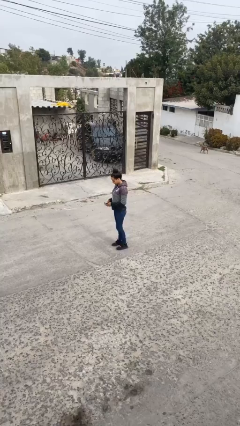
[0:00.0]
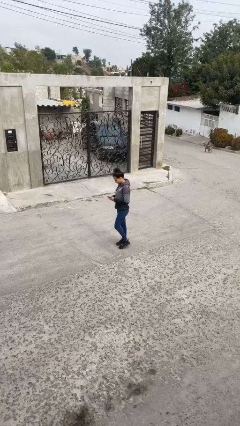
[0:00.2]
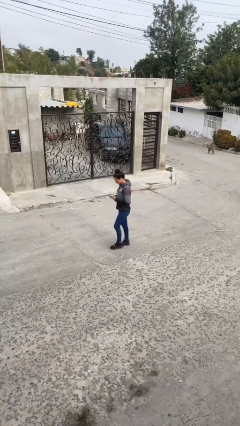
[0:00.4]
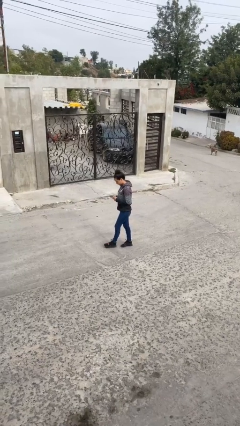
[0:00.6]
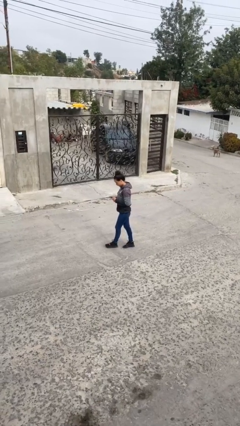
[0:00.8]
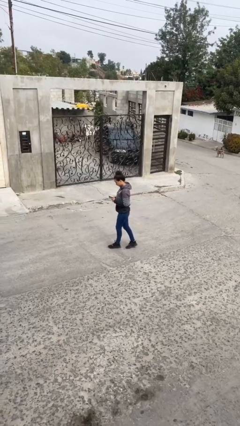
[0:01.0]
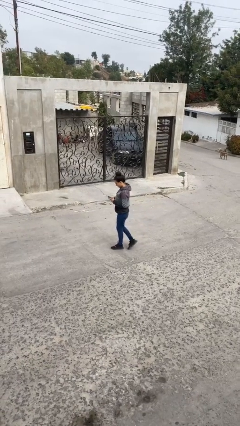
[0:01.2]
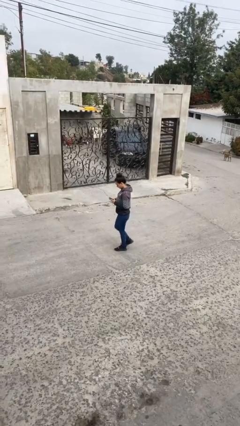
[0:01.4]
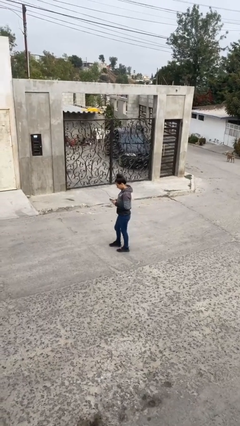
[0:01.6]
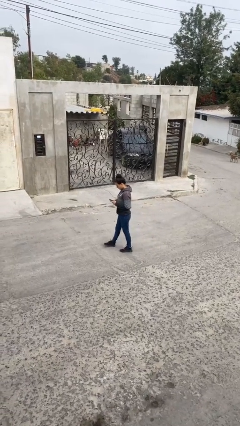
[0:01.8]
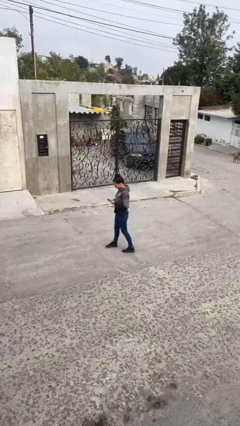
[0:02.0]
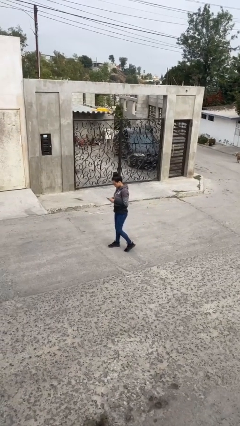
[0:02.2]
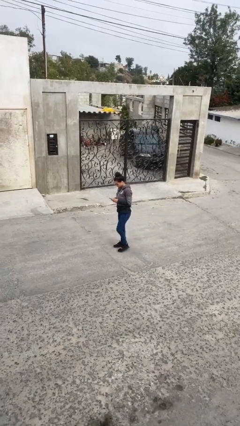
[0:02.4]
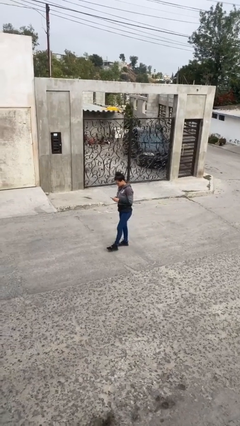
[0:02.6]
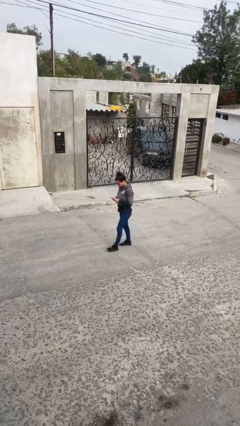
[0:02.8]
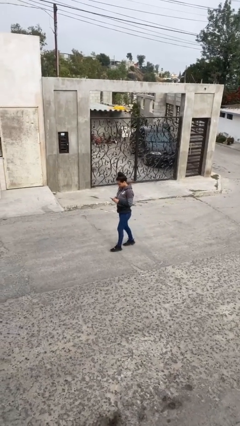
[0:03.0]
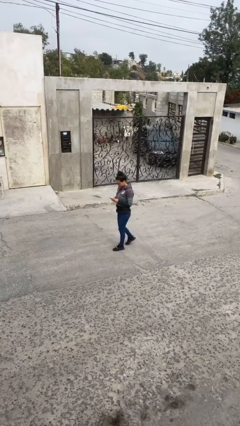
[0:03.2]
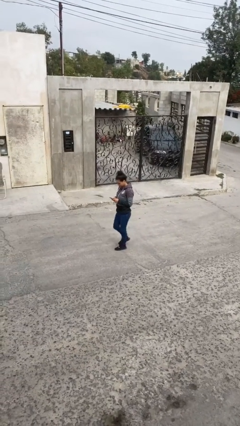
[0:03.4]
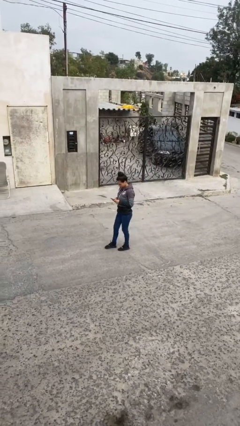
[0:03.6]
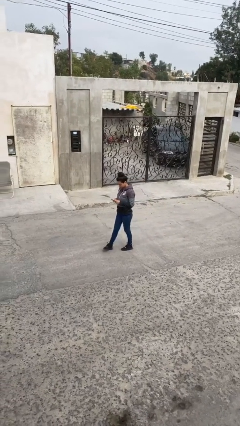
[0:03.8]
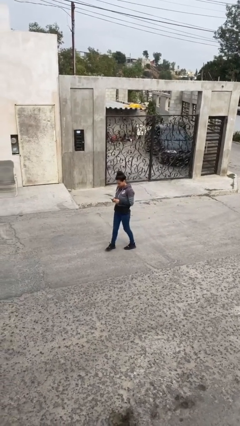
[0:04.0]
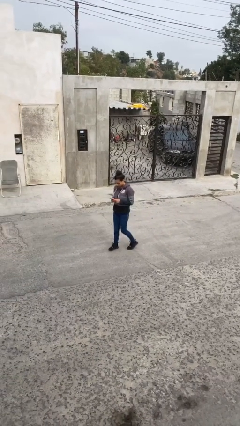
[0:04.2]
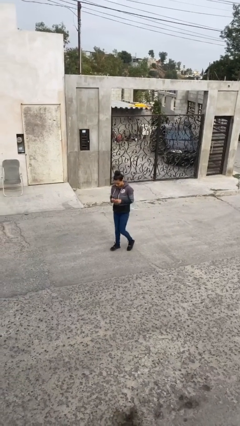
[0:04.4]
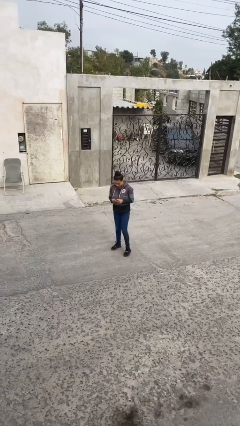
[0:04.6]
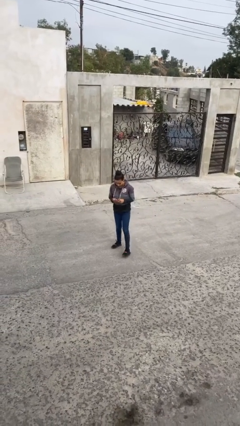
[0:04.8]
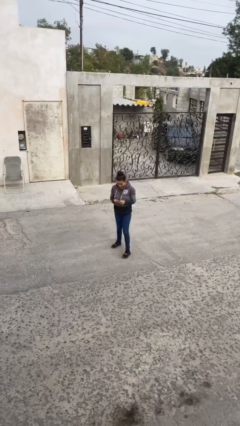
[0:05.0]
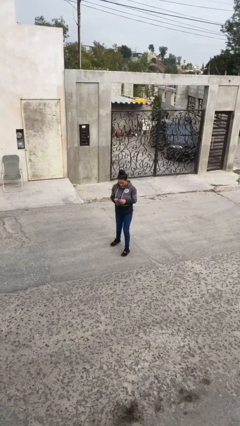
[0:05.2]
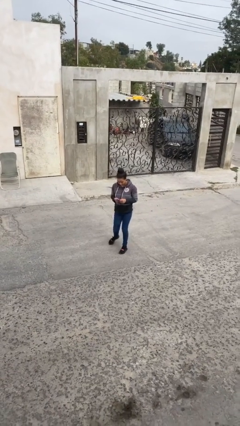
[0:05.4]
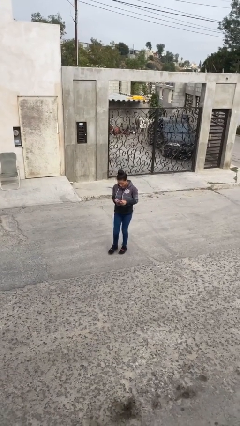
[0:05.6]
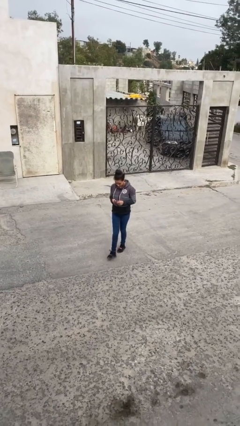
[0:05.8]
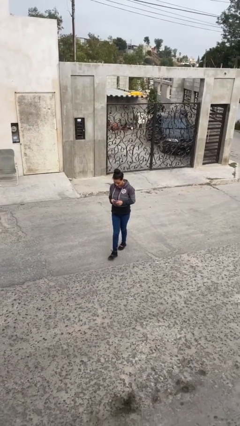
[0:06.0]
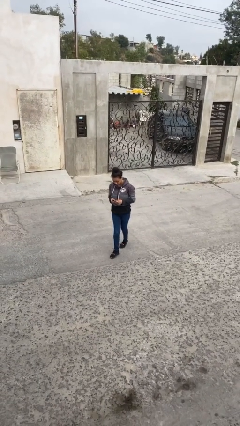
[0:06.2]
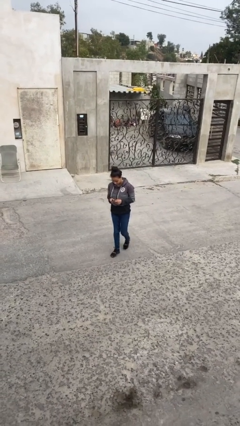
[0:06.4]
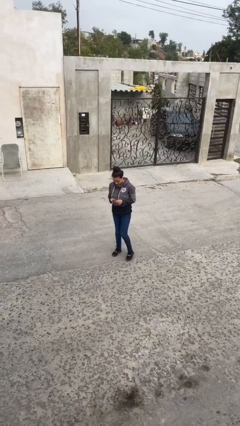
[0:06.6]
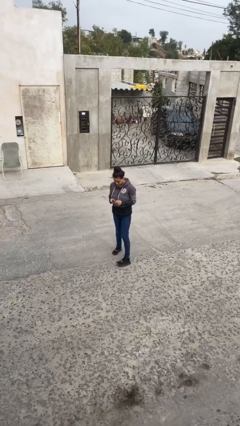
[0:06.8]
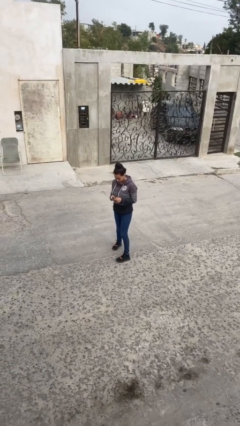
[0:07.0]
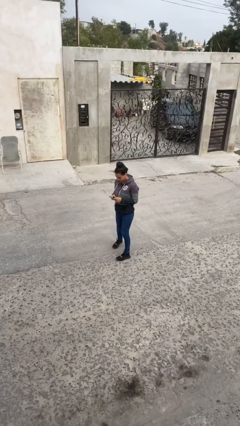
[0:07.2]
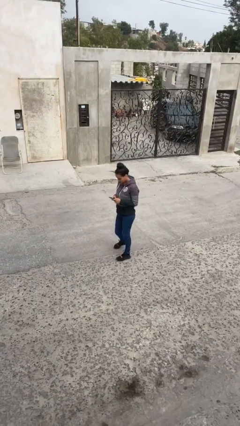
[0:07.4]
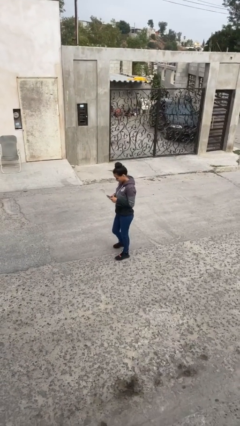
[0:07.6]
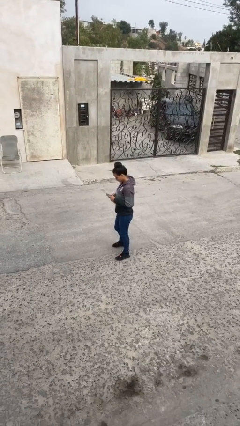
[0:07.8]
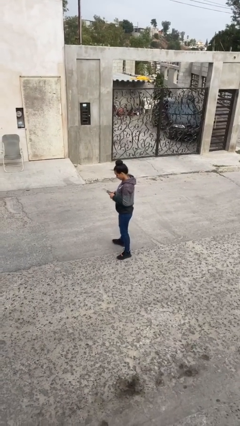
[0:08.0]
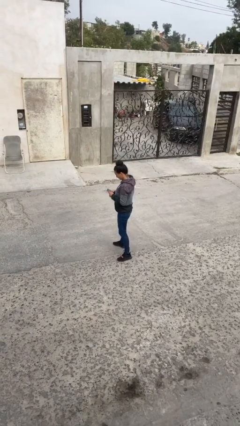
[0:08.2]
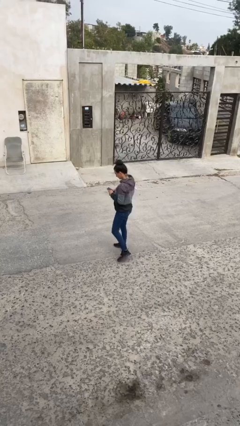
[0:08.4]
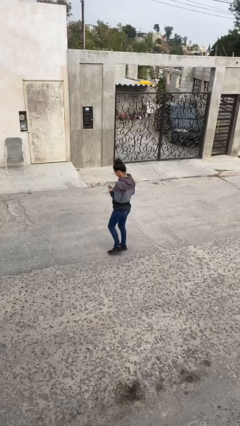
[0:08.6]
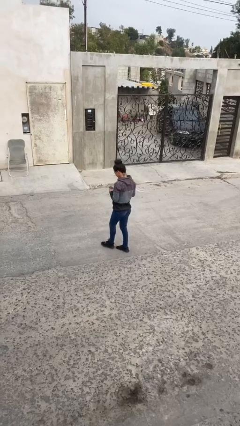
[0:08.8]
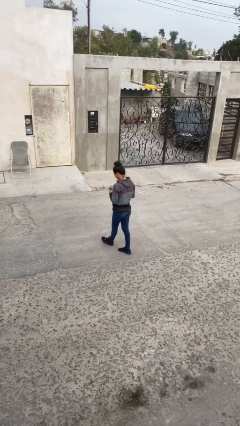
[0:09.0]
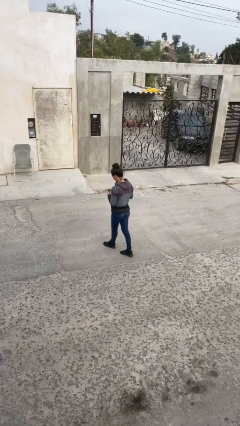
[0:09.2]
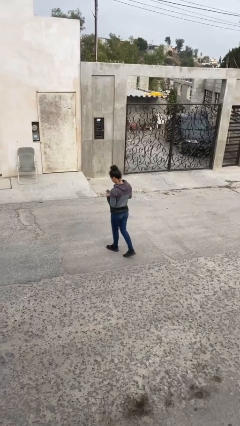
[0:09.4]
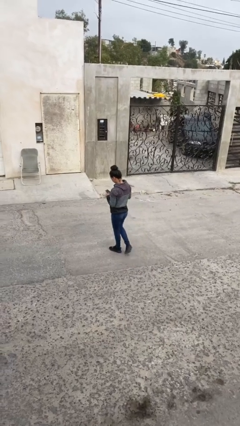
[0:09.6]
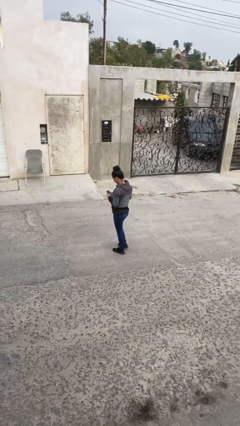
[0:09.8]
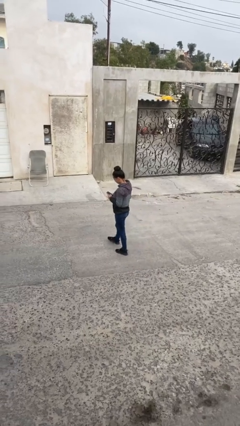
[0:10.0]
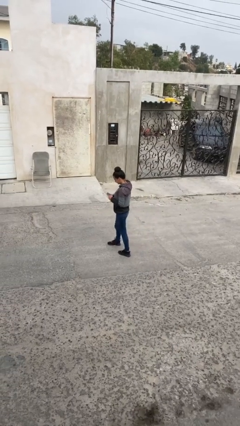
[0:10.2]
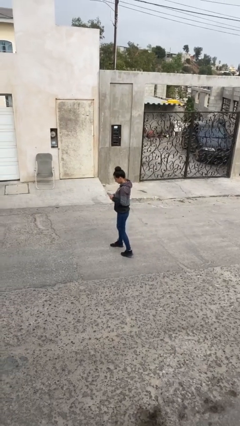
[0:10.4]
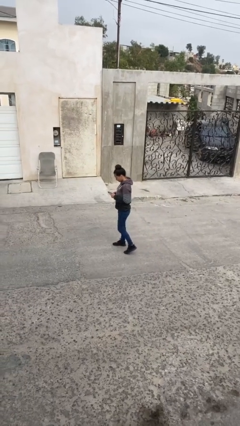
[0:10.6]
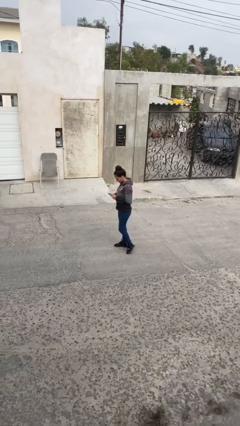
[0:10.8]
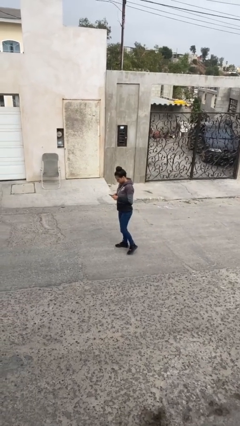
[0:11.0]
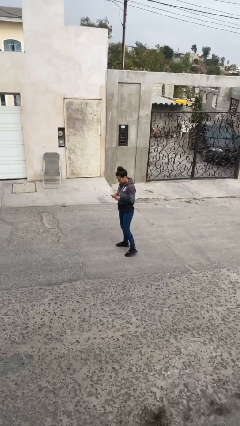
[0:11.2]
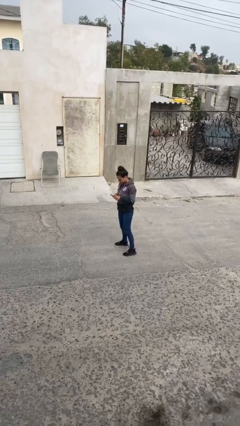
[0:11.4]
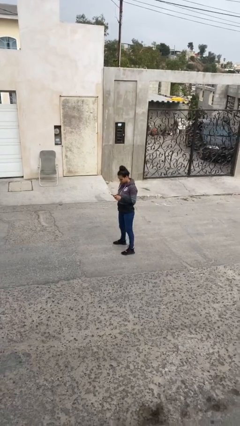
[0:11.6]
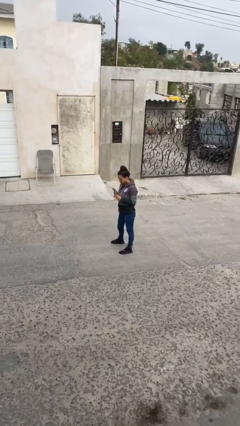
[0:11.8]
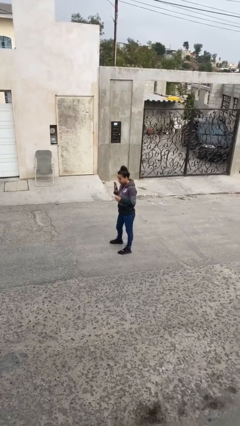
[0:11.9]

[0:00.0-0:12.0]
person texts on phone

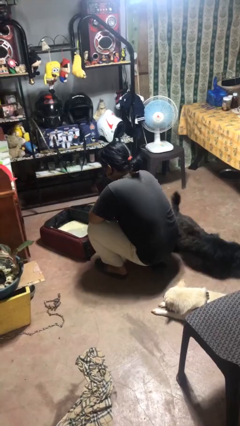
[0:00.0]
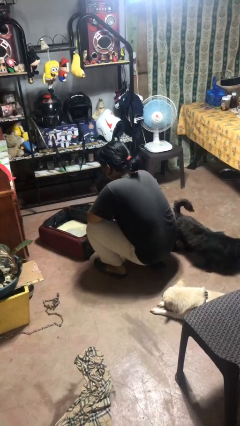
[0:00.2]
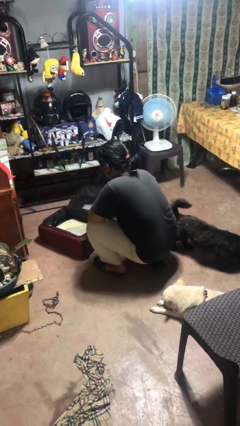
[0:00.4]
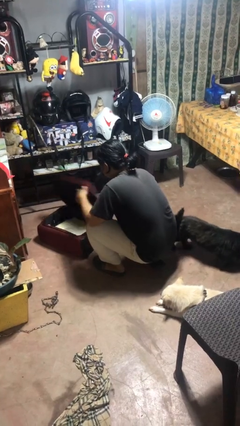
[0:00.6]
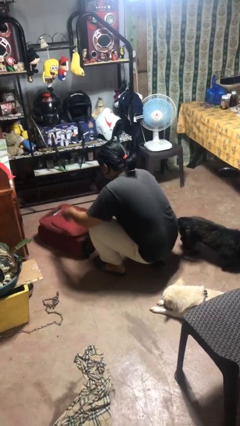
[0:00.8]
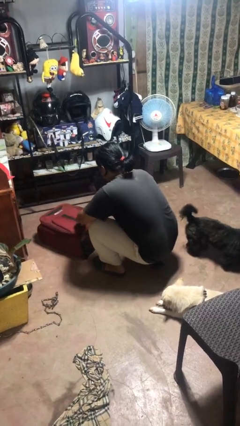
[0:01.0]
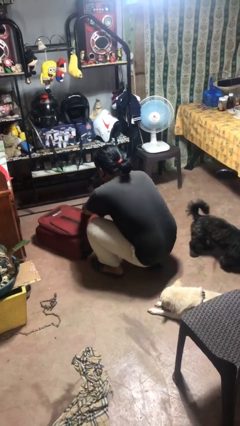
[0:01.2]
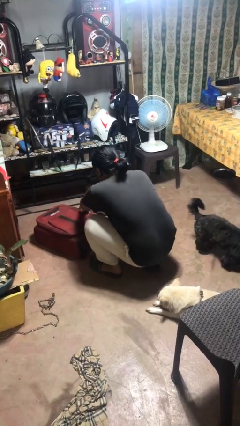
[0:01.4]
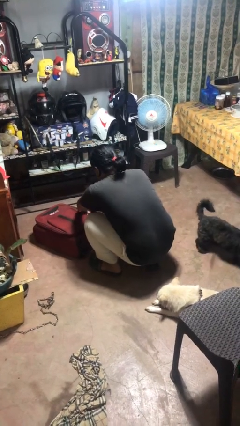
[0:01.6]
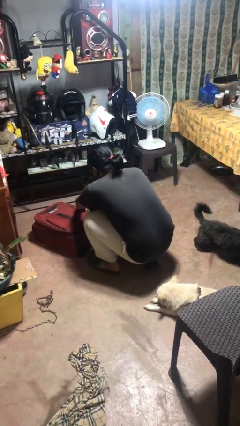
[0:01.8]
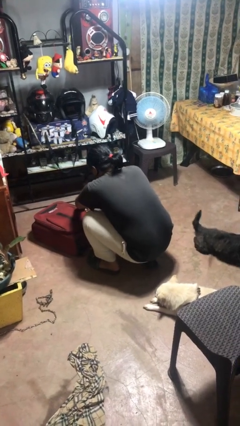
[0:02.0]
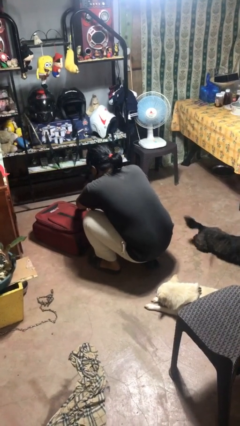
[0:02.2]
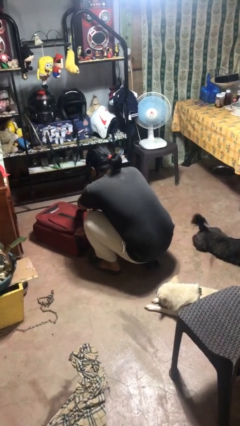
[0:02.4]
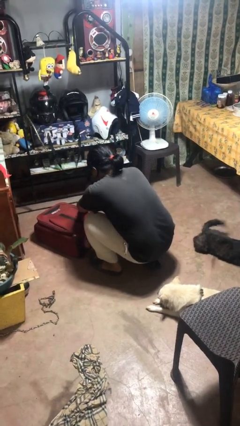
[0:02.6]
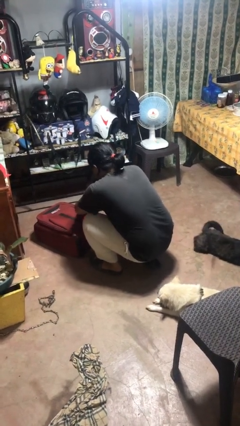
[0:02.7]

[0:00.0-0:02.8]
person closes suitcase

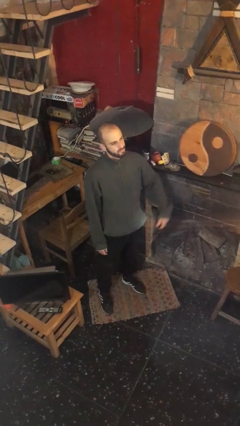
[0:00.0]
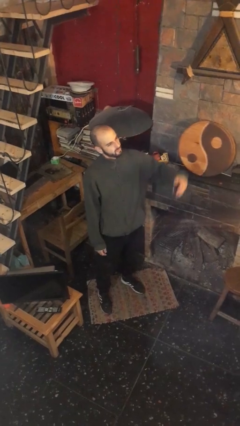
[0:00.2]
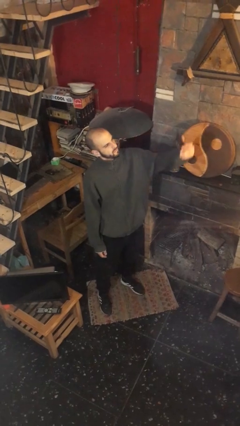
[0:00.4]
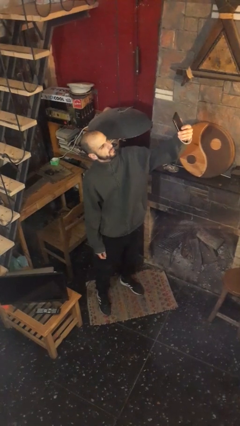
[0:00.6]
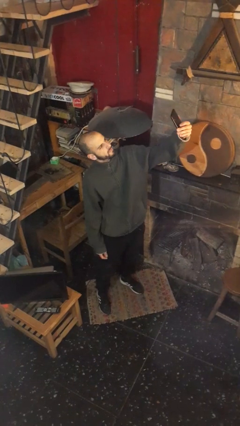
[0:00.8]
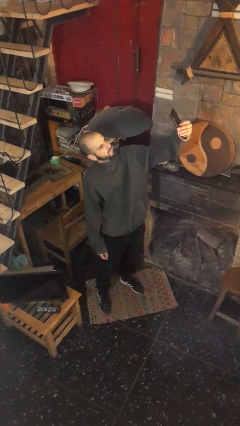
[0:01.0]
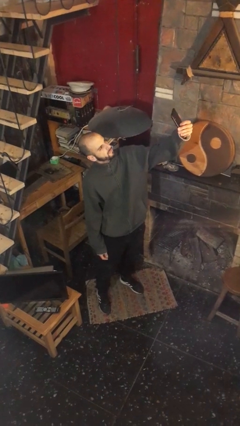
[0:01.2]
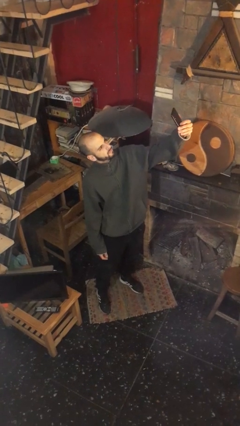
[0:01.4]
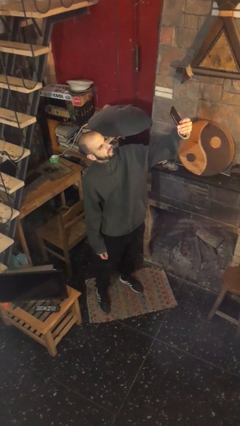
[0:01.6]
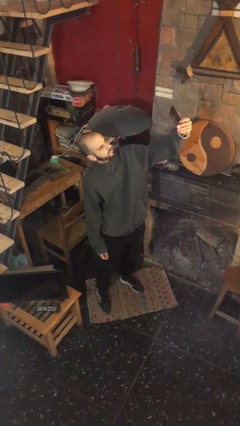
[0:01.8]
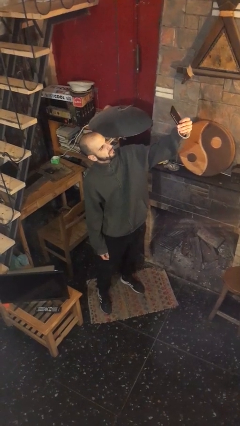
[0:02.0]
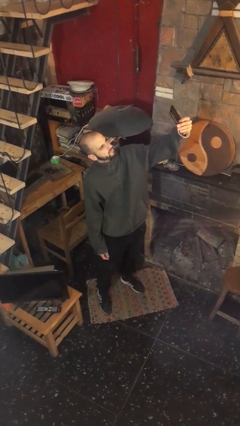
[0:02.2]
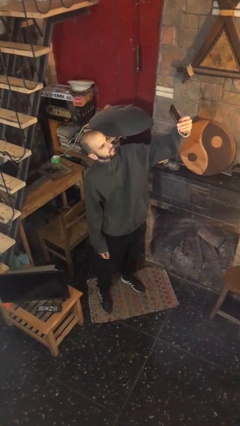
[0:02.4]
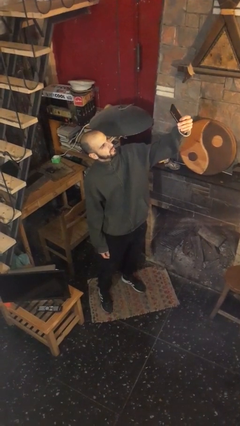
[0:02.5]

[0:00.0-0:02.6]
person takes selfie

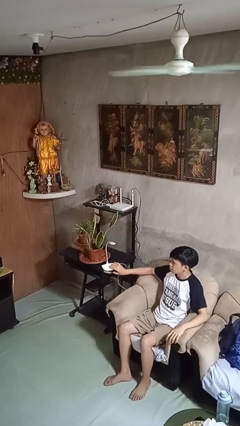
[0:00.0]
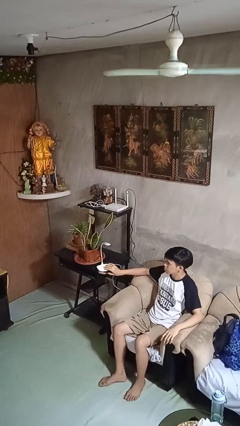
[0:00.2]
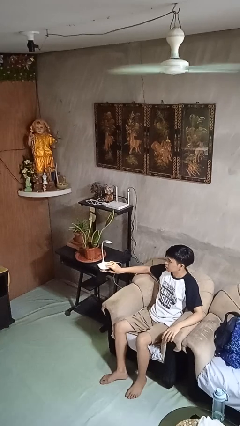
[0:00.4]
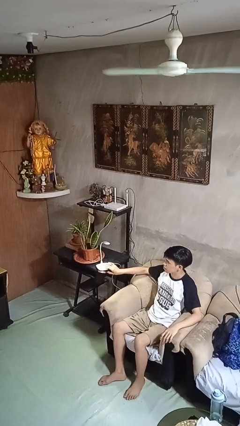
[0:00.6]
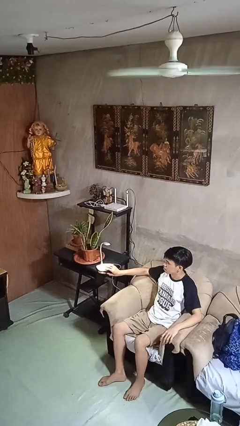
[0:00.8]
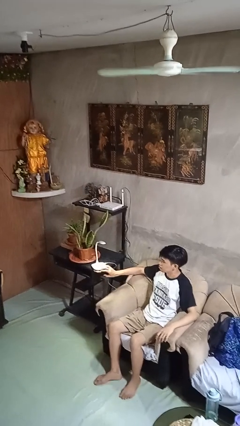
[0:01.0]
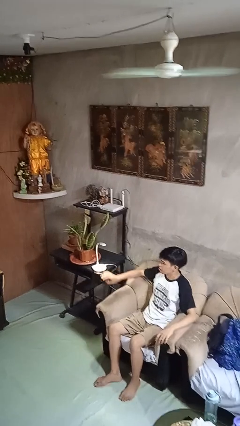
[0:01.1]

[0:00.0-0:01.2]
person turns on lamp
